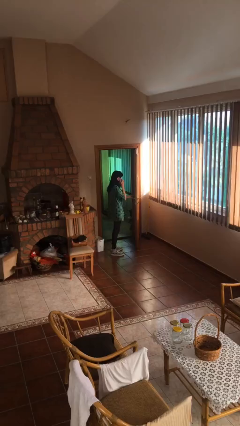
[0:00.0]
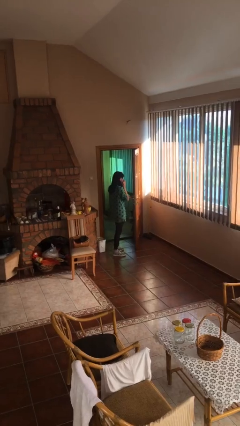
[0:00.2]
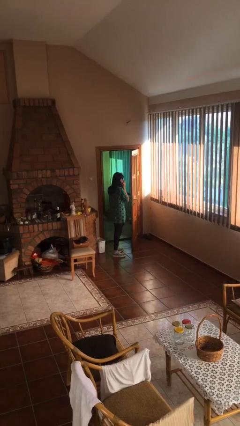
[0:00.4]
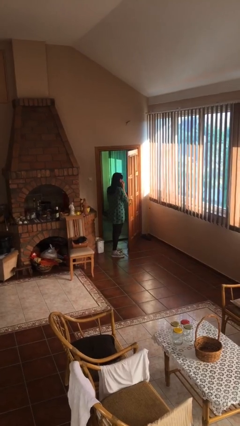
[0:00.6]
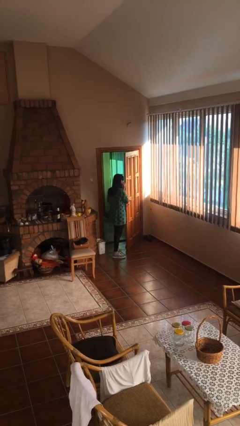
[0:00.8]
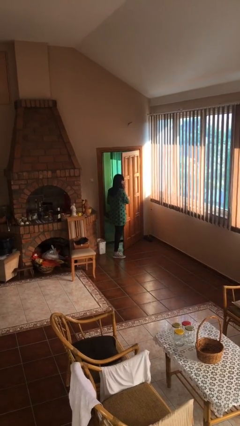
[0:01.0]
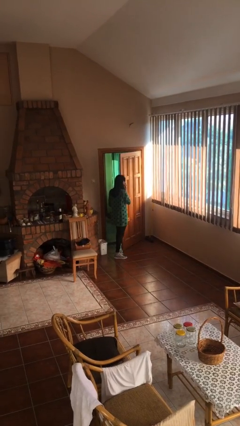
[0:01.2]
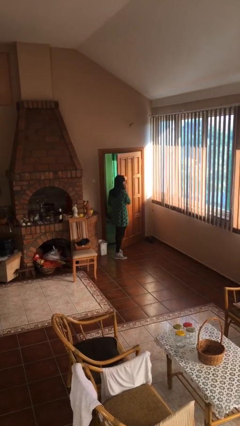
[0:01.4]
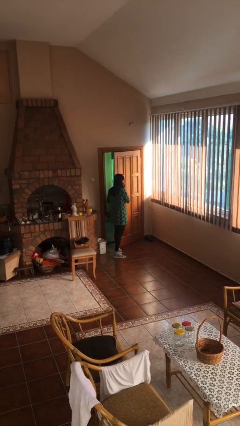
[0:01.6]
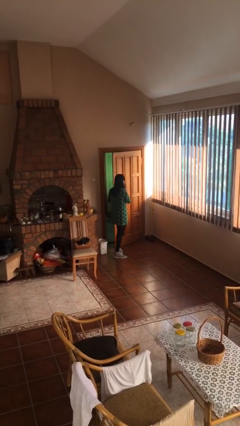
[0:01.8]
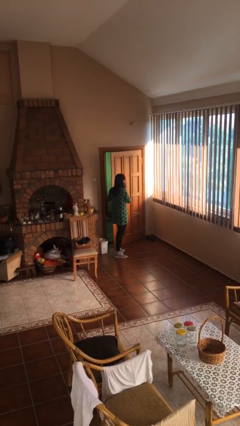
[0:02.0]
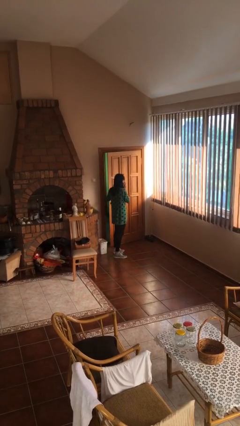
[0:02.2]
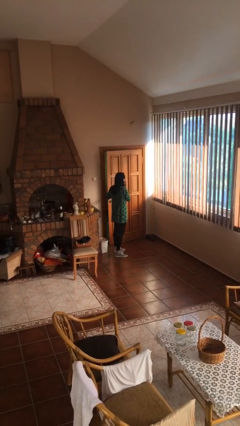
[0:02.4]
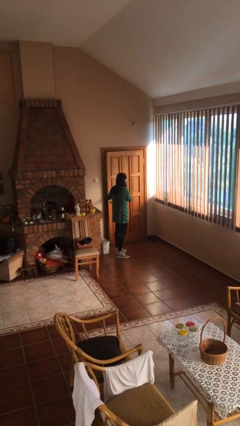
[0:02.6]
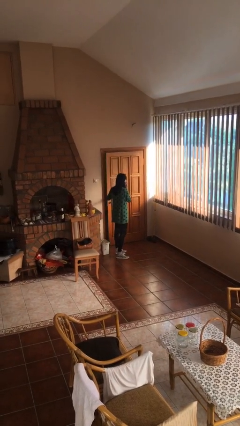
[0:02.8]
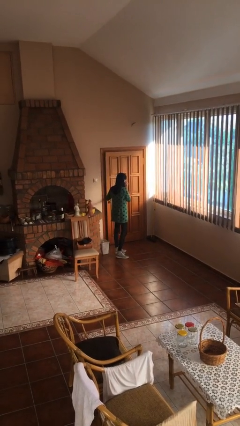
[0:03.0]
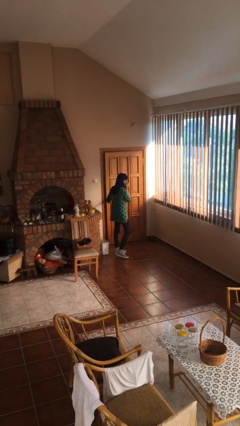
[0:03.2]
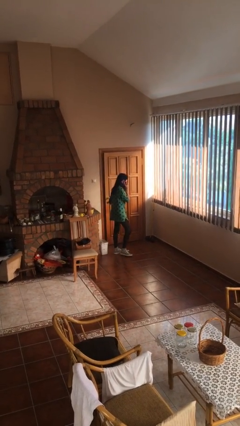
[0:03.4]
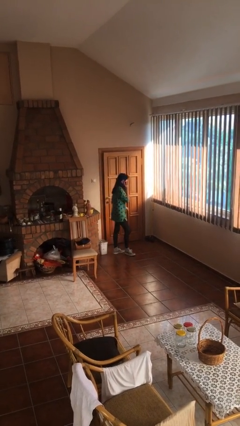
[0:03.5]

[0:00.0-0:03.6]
person closes facility door

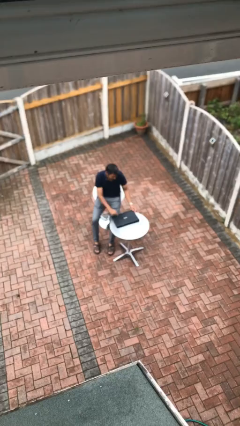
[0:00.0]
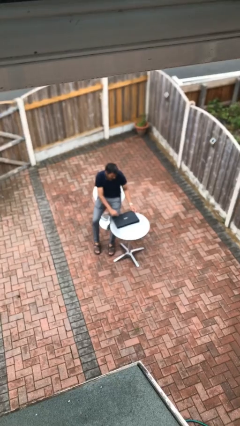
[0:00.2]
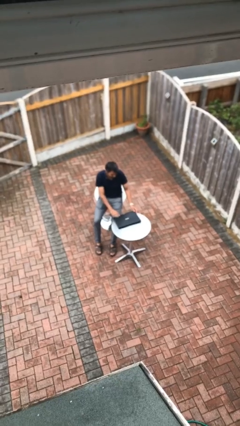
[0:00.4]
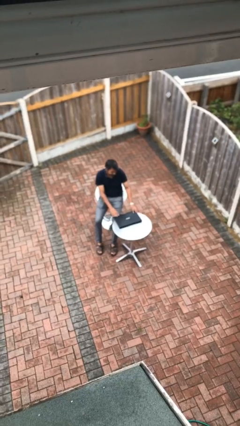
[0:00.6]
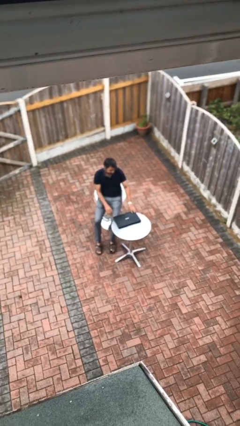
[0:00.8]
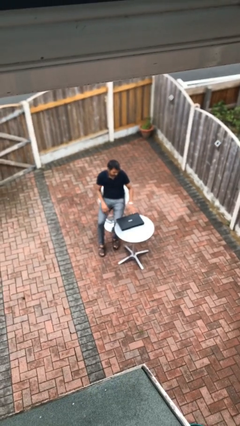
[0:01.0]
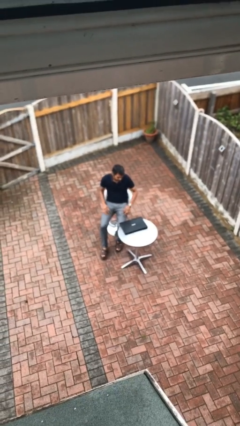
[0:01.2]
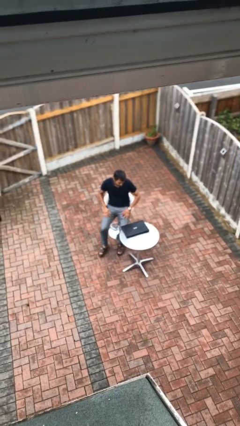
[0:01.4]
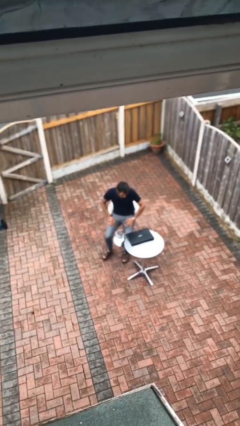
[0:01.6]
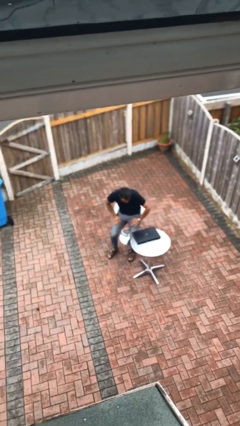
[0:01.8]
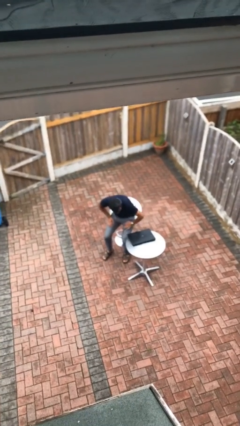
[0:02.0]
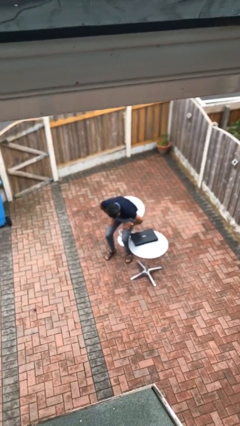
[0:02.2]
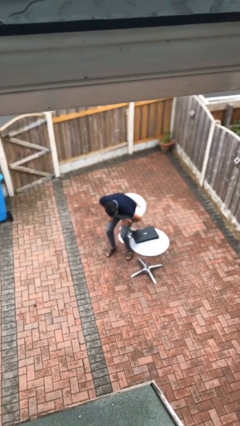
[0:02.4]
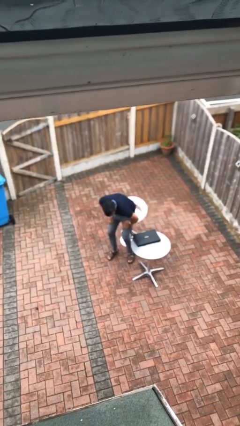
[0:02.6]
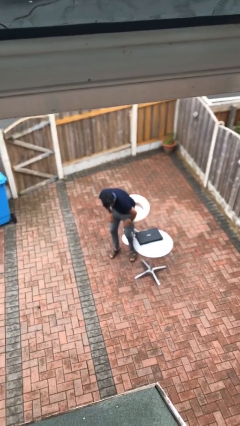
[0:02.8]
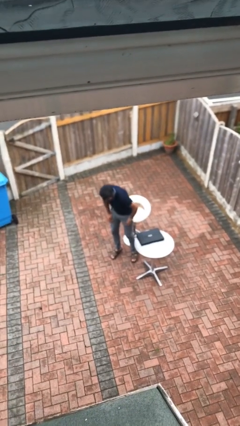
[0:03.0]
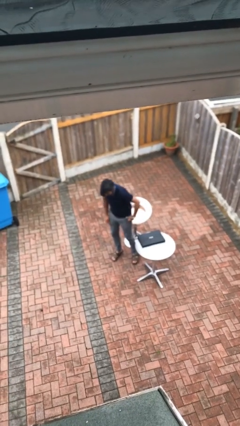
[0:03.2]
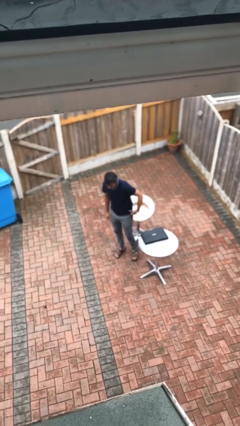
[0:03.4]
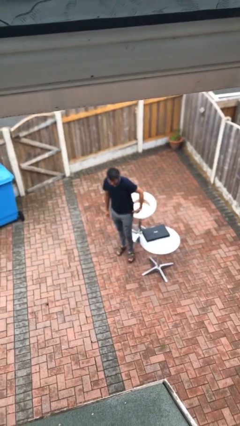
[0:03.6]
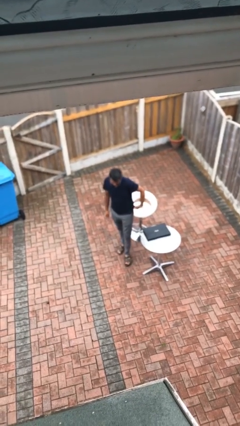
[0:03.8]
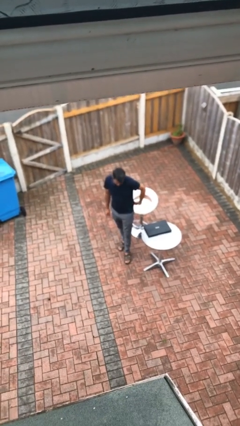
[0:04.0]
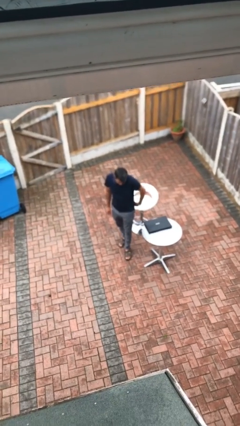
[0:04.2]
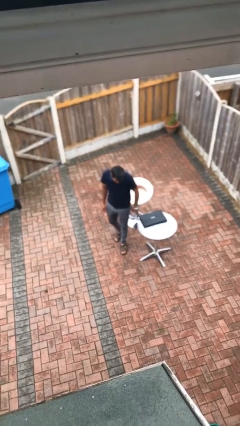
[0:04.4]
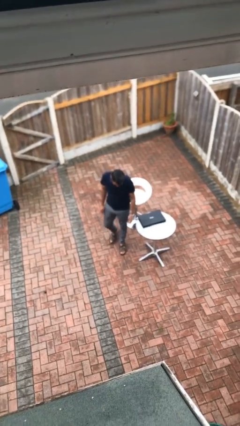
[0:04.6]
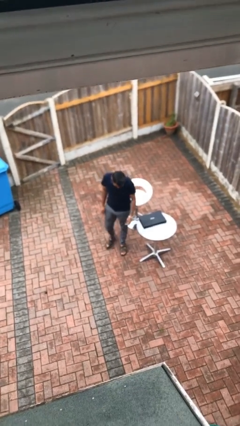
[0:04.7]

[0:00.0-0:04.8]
person stands up

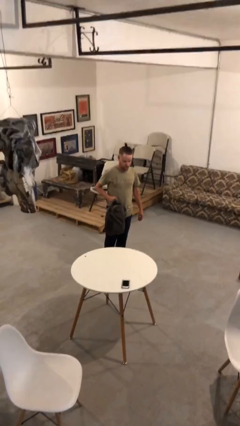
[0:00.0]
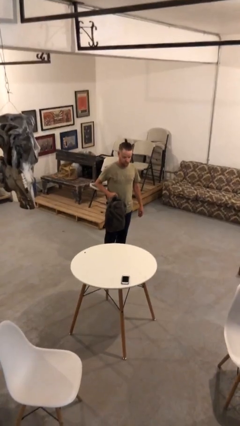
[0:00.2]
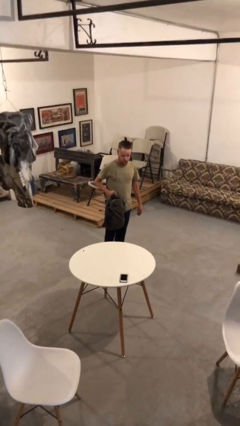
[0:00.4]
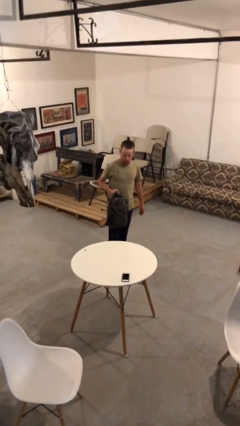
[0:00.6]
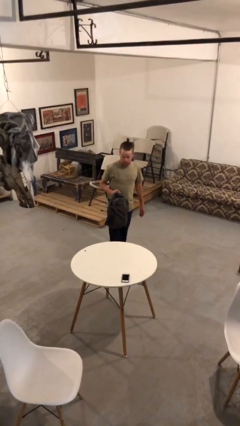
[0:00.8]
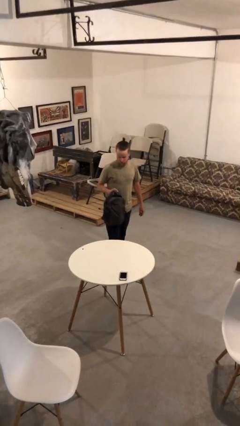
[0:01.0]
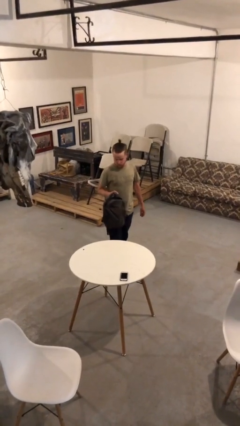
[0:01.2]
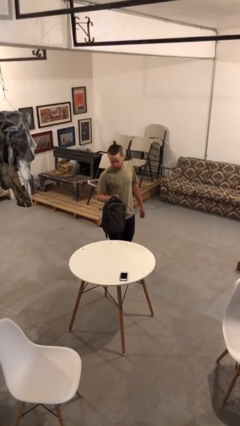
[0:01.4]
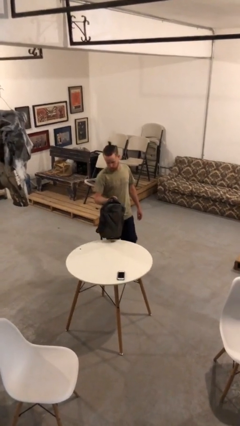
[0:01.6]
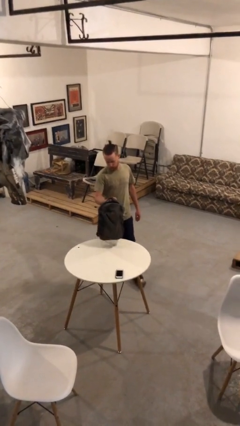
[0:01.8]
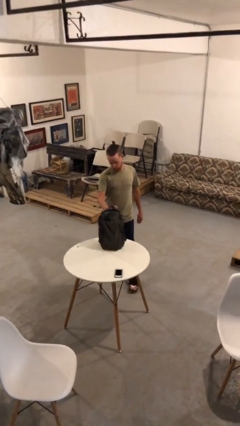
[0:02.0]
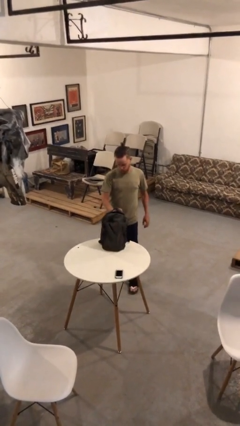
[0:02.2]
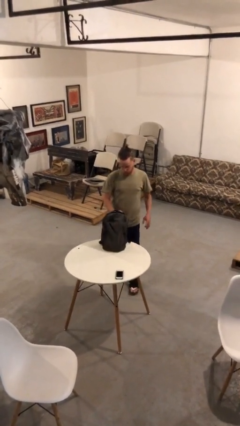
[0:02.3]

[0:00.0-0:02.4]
person puts down object on table

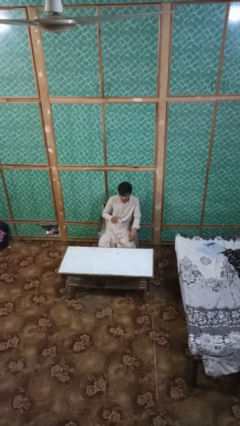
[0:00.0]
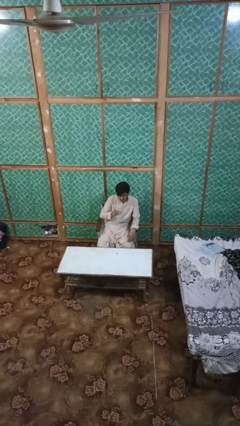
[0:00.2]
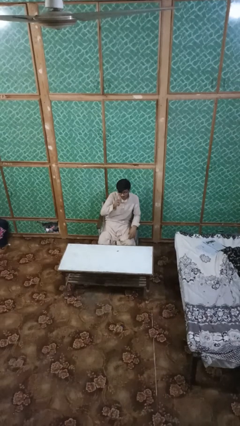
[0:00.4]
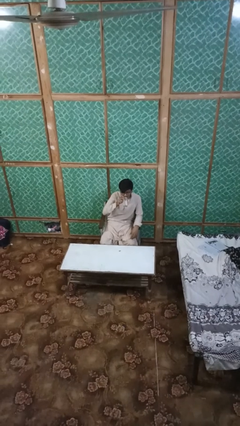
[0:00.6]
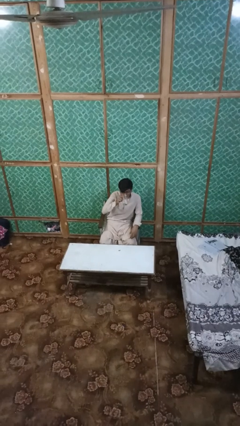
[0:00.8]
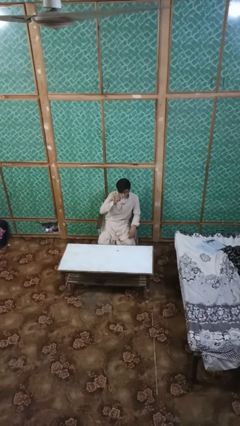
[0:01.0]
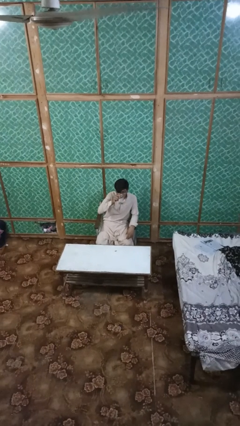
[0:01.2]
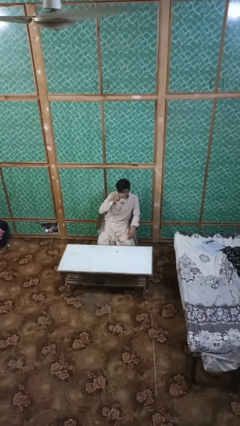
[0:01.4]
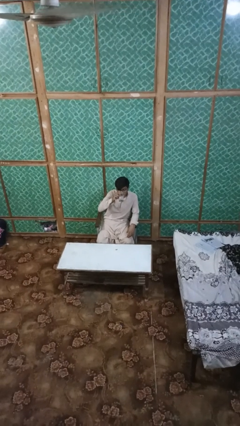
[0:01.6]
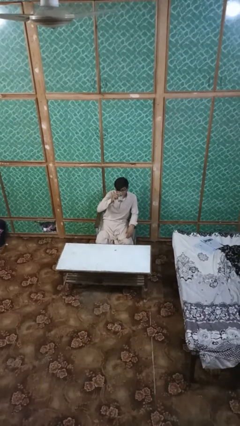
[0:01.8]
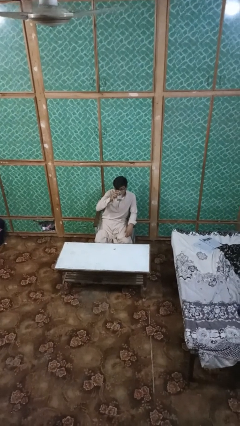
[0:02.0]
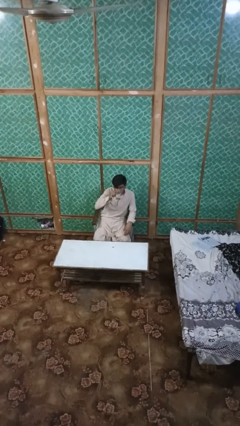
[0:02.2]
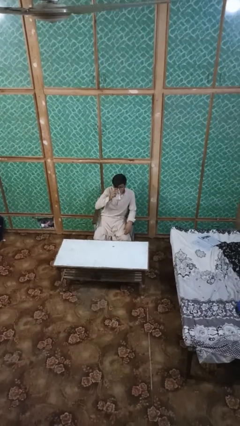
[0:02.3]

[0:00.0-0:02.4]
person drinks from shotglass

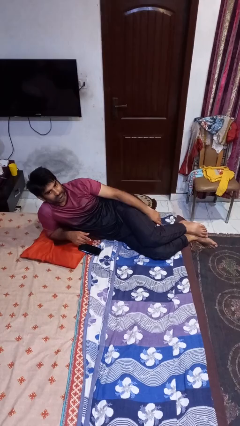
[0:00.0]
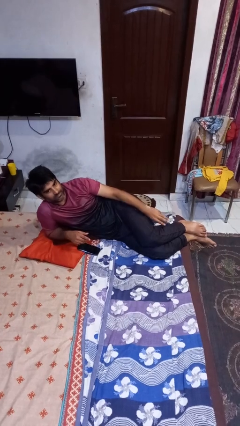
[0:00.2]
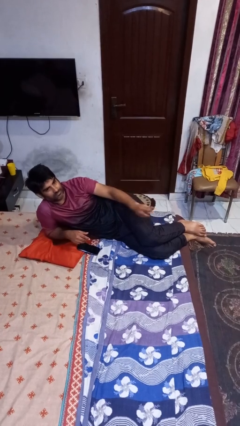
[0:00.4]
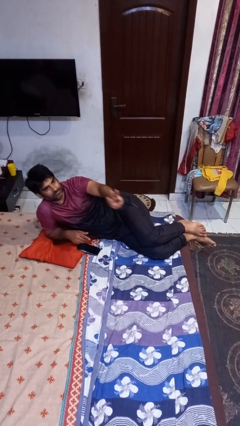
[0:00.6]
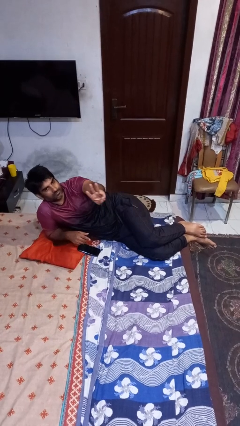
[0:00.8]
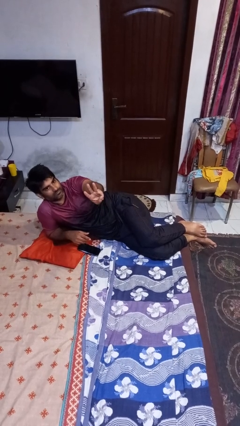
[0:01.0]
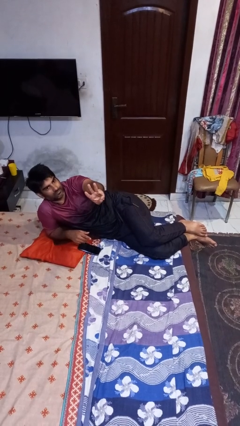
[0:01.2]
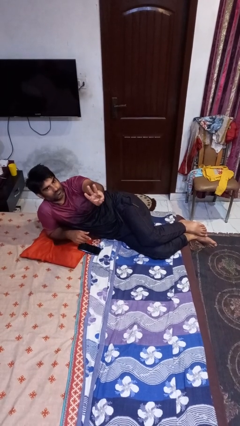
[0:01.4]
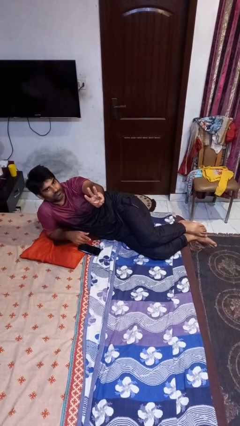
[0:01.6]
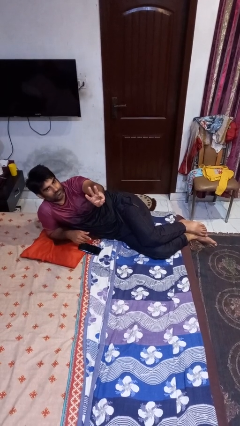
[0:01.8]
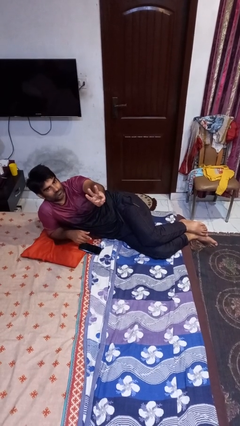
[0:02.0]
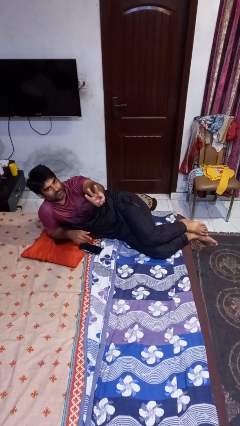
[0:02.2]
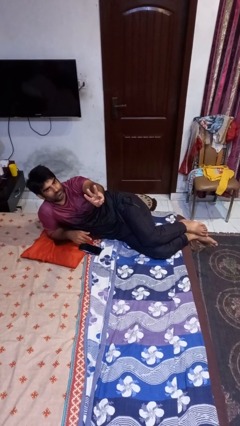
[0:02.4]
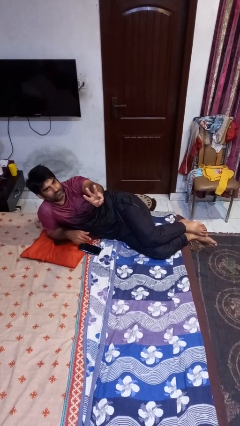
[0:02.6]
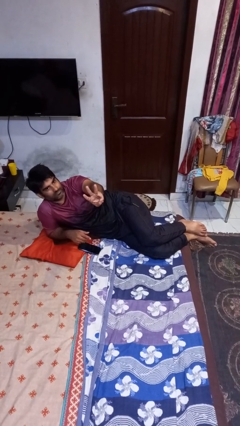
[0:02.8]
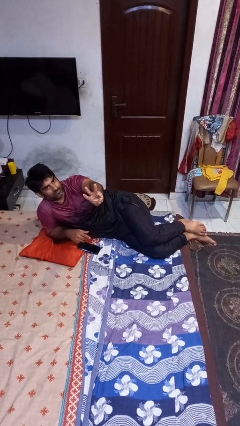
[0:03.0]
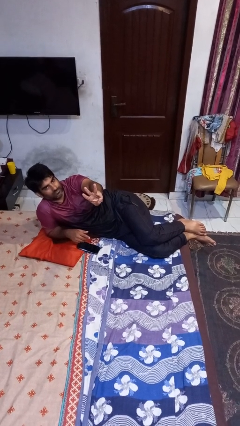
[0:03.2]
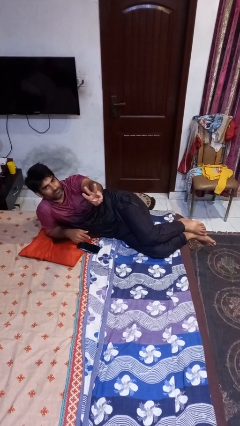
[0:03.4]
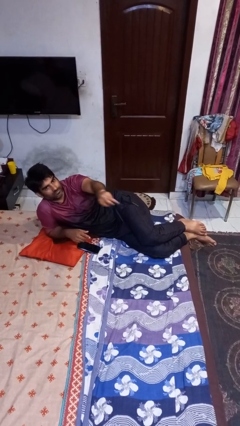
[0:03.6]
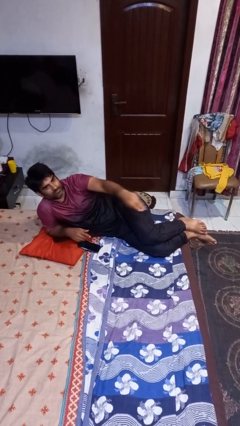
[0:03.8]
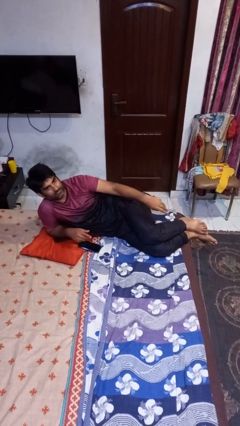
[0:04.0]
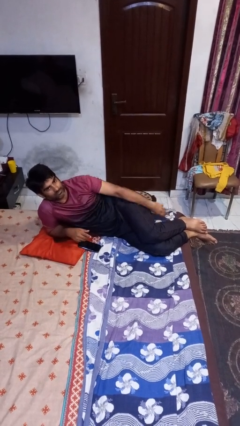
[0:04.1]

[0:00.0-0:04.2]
person gestures number three

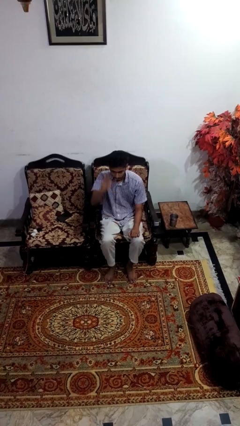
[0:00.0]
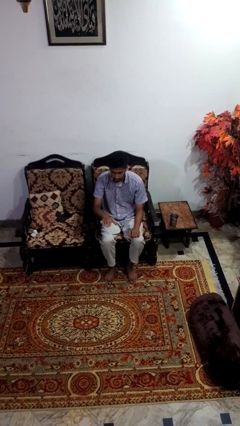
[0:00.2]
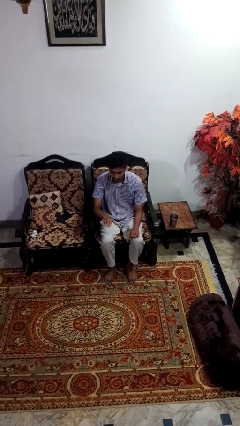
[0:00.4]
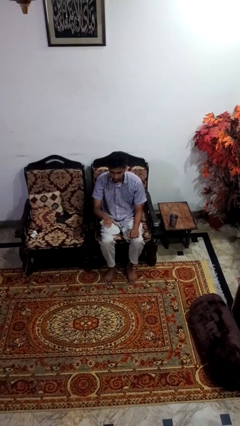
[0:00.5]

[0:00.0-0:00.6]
person gestures swipe down
